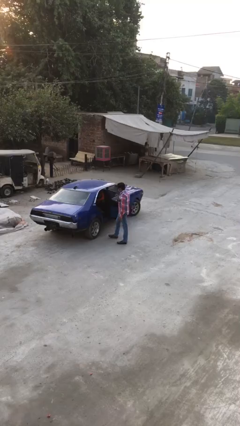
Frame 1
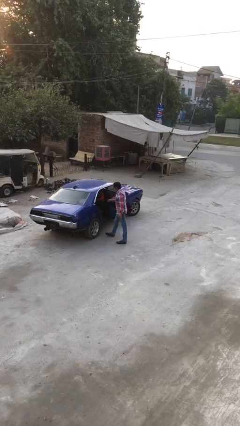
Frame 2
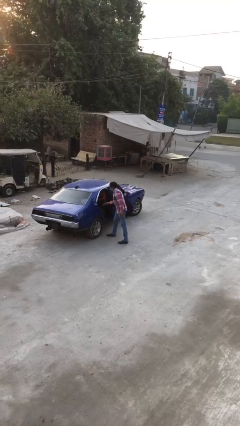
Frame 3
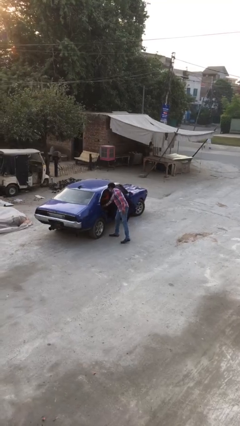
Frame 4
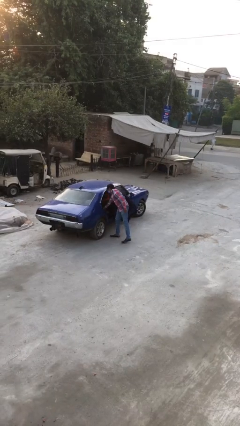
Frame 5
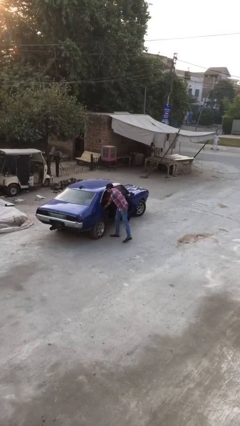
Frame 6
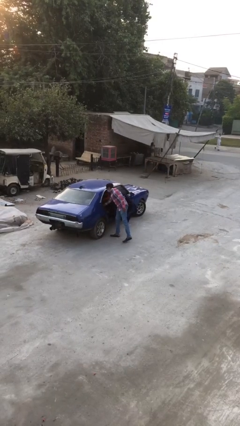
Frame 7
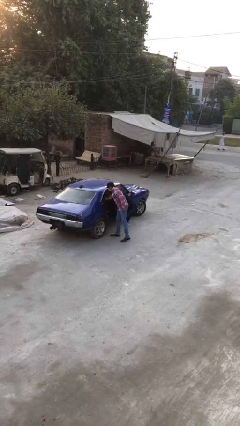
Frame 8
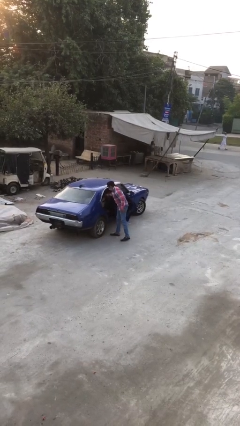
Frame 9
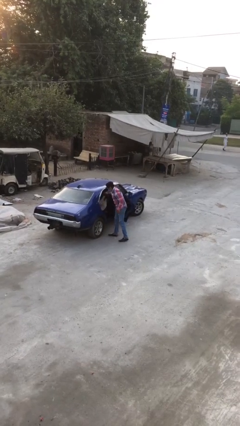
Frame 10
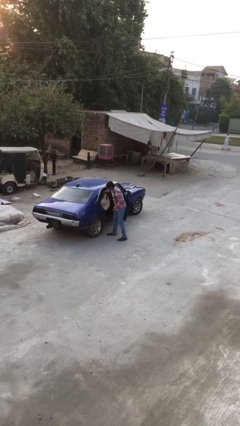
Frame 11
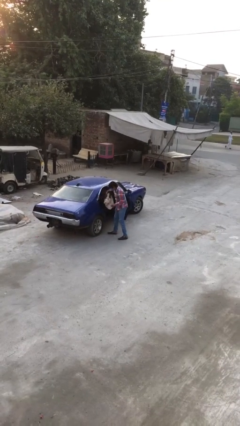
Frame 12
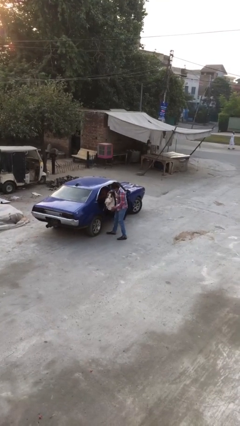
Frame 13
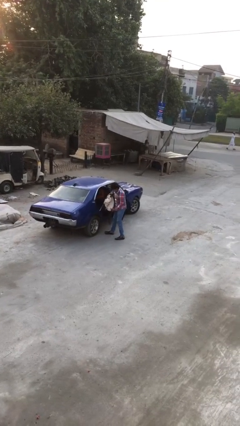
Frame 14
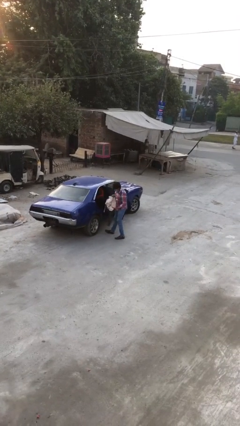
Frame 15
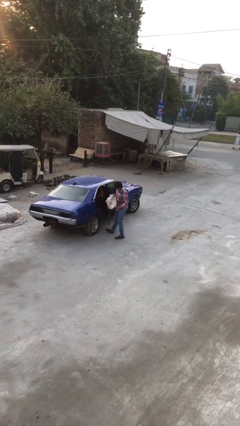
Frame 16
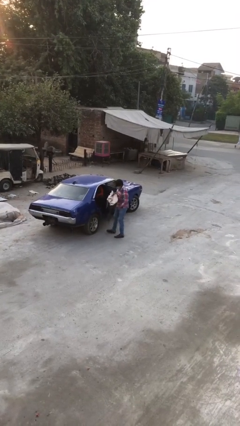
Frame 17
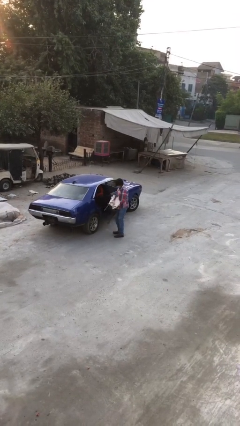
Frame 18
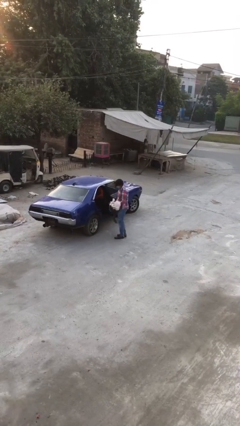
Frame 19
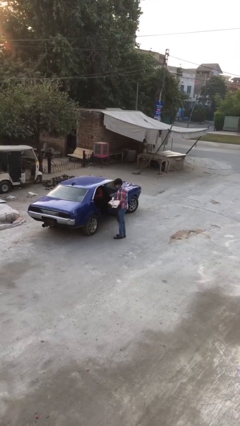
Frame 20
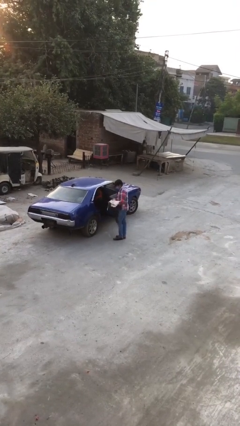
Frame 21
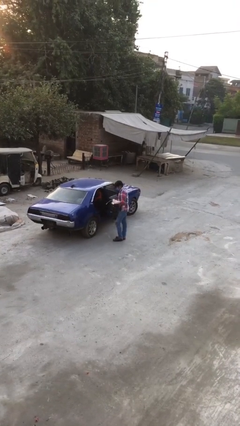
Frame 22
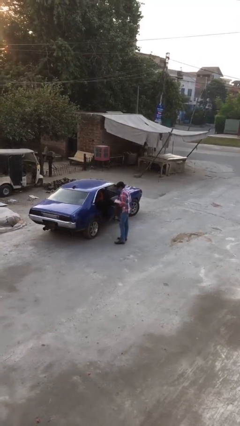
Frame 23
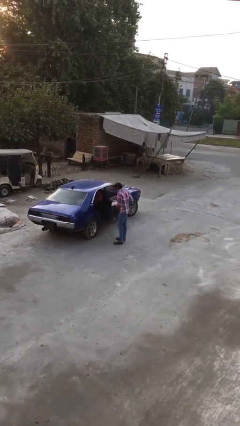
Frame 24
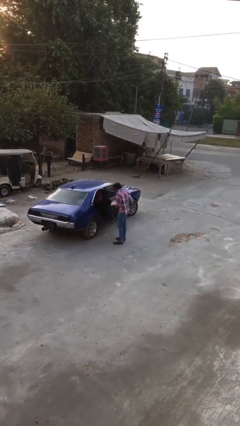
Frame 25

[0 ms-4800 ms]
person unloads car

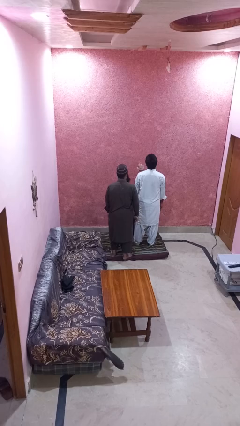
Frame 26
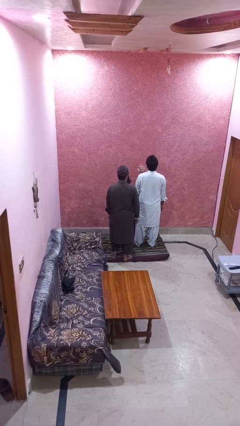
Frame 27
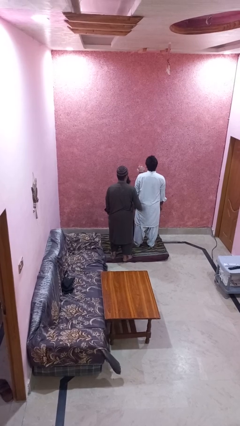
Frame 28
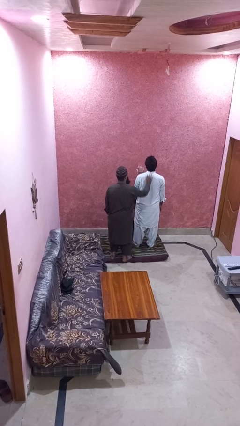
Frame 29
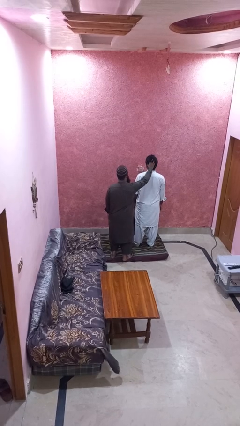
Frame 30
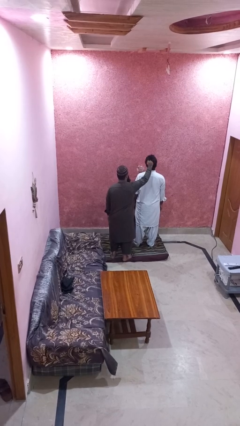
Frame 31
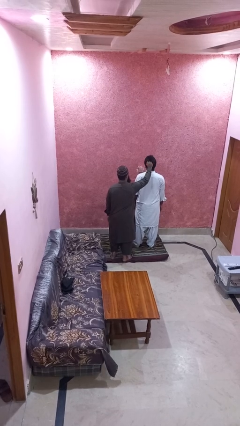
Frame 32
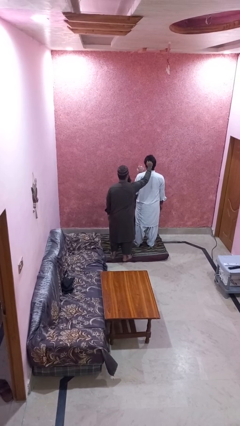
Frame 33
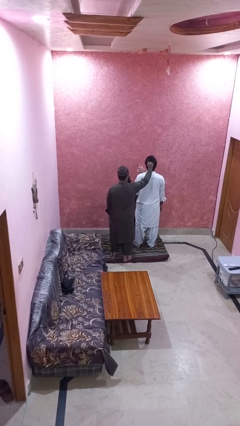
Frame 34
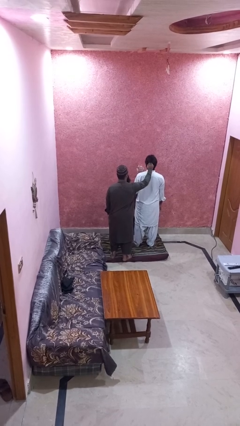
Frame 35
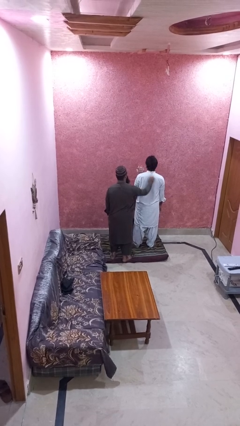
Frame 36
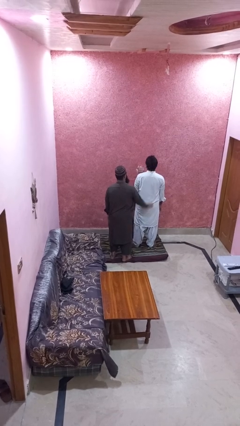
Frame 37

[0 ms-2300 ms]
person grabs person by hair

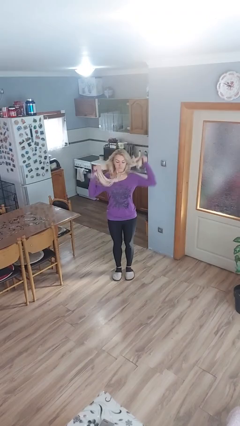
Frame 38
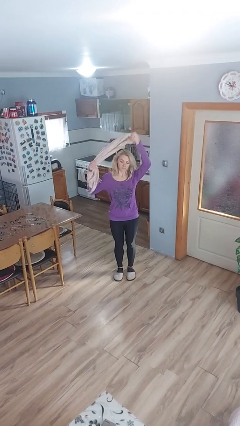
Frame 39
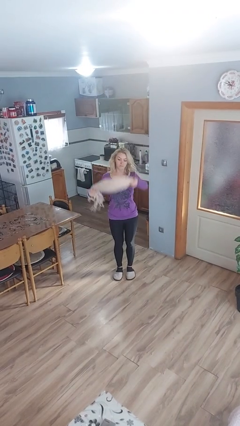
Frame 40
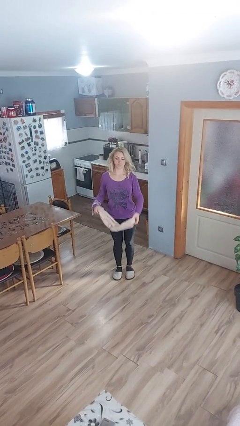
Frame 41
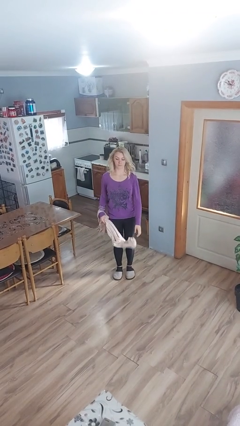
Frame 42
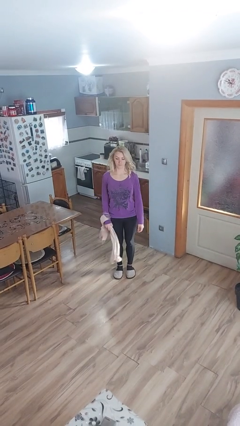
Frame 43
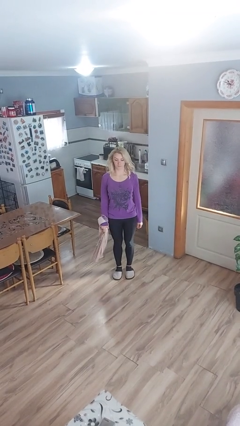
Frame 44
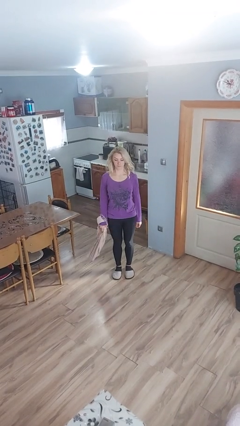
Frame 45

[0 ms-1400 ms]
person takes off scarf

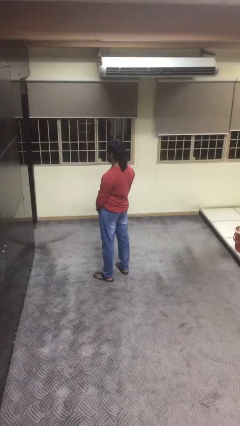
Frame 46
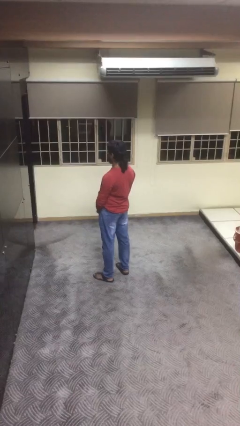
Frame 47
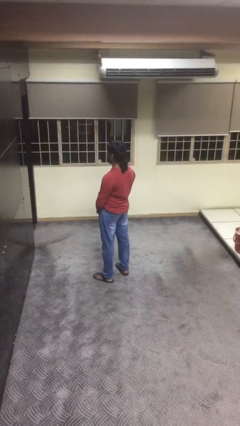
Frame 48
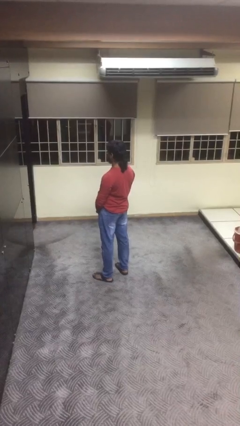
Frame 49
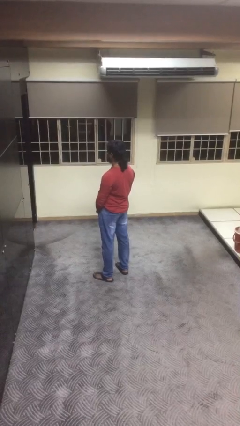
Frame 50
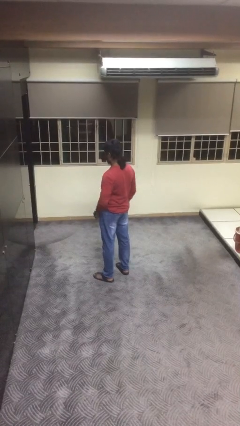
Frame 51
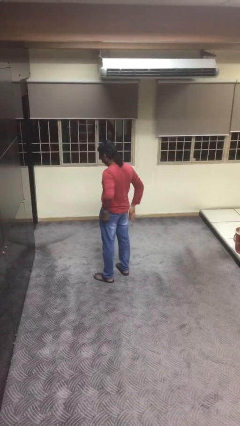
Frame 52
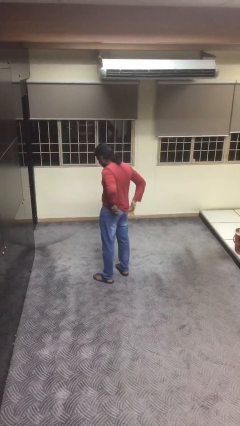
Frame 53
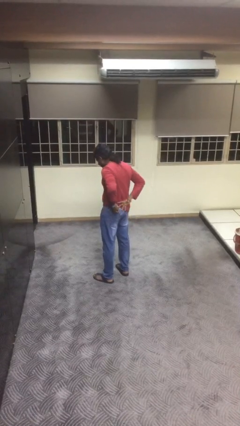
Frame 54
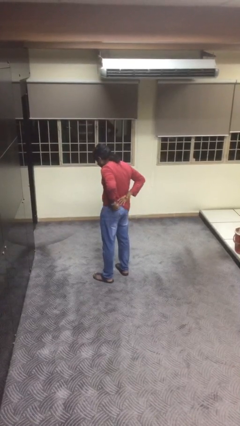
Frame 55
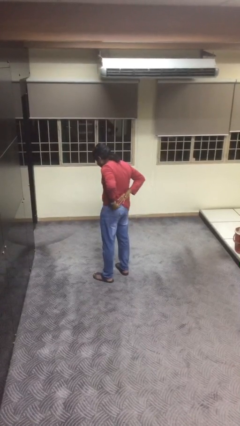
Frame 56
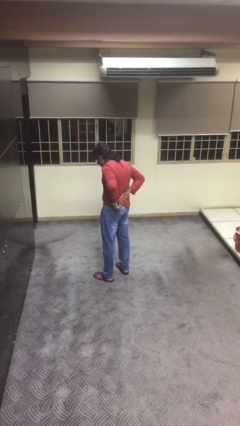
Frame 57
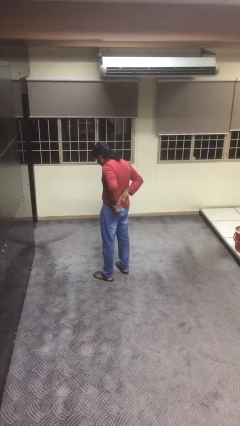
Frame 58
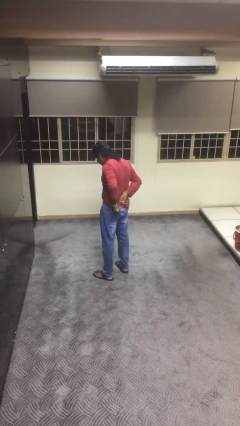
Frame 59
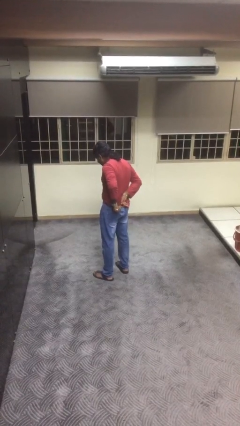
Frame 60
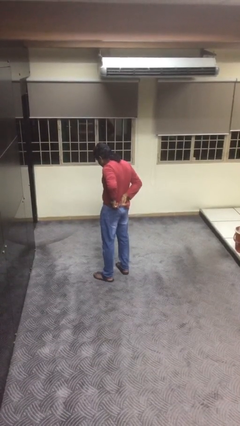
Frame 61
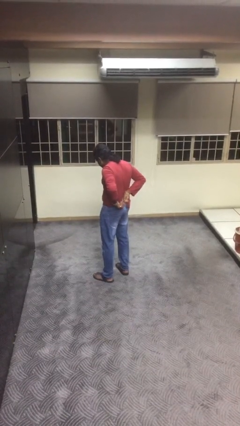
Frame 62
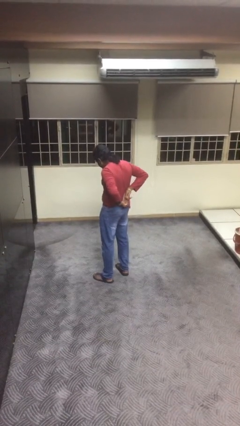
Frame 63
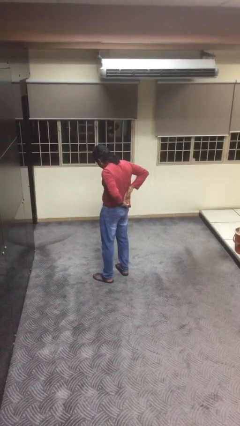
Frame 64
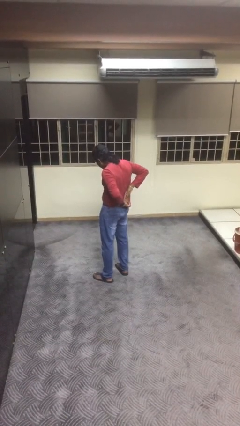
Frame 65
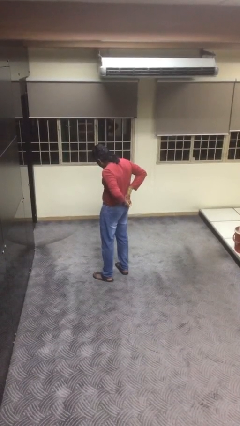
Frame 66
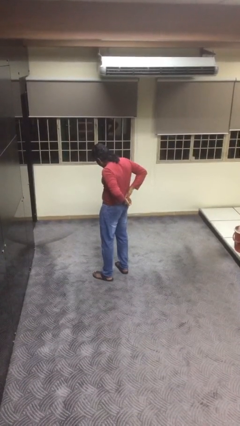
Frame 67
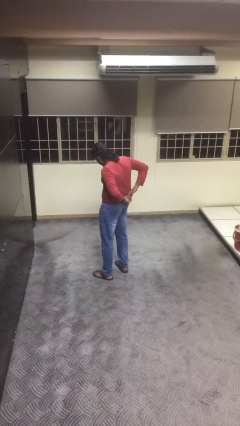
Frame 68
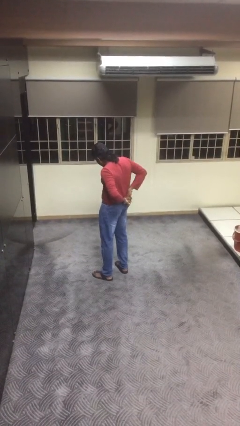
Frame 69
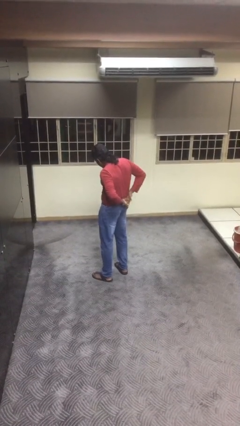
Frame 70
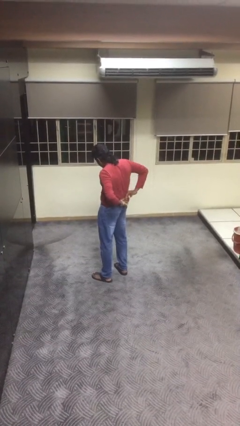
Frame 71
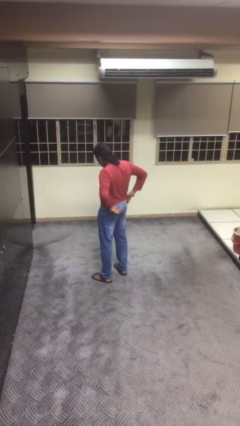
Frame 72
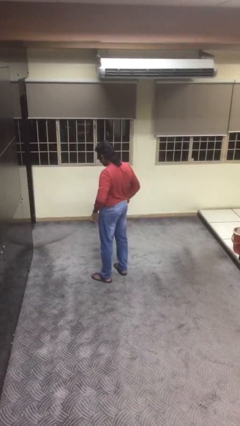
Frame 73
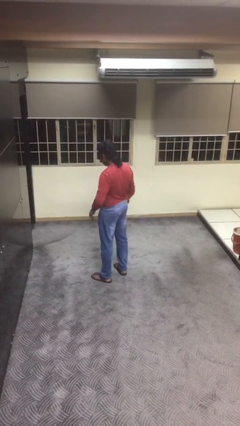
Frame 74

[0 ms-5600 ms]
person tucks in shirt

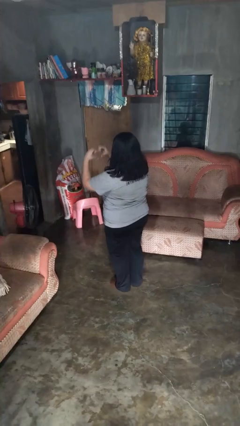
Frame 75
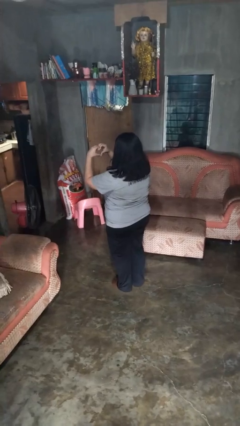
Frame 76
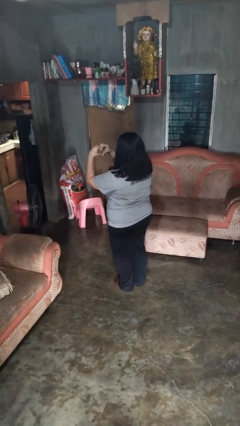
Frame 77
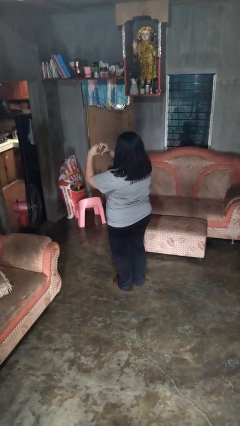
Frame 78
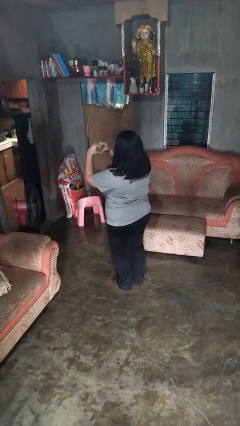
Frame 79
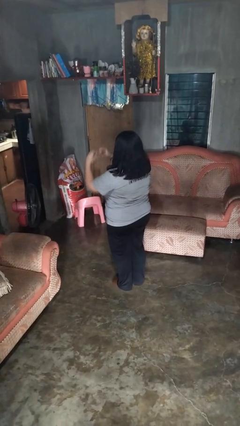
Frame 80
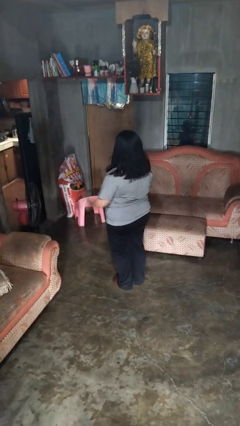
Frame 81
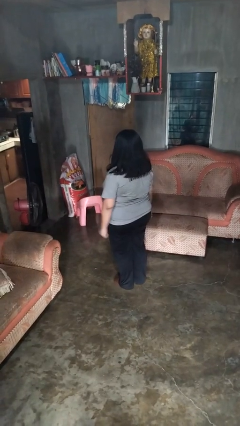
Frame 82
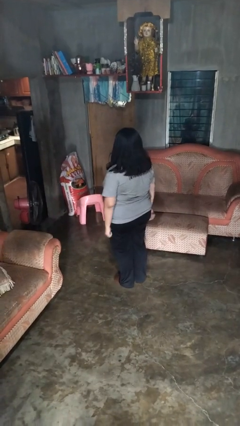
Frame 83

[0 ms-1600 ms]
person gestures heart

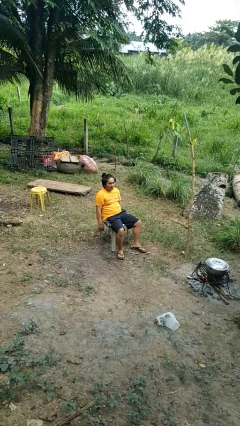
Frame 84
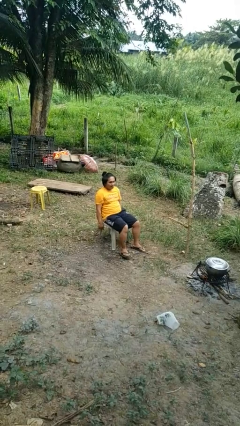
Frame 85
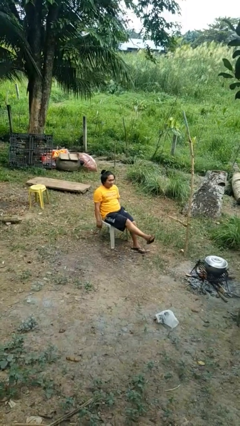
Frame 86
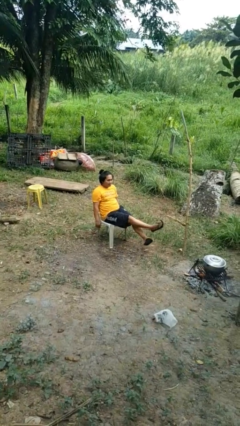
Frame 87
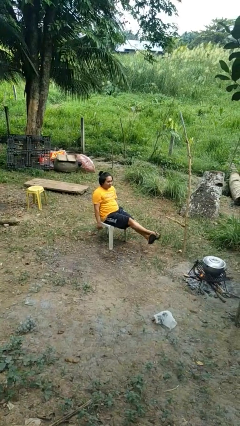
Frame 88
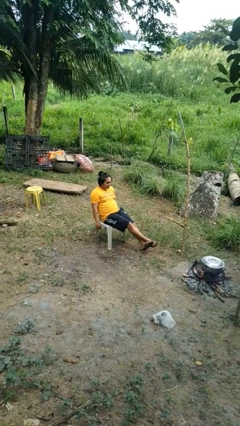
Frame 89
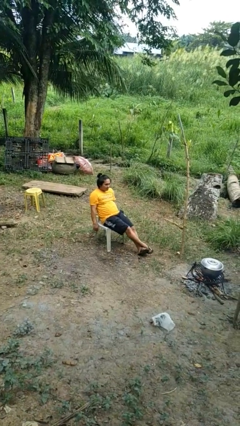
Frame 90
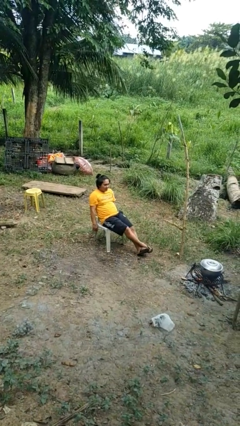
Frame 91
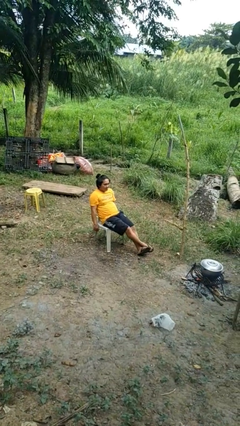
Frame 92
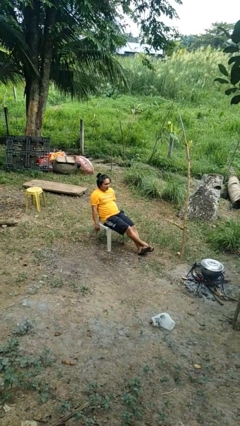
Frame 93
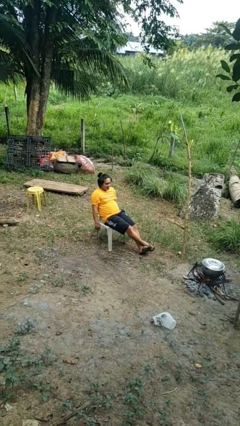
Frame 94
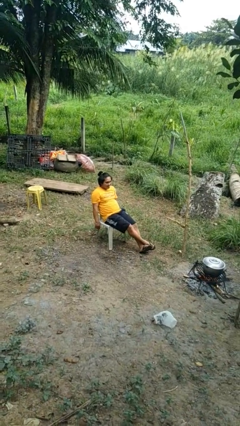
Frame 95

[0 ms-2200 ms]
person crosses legs
